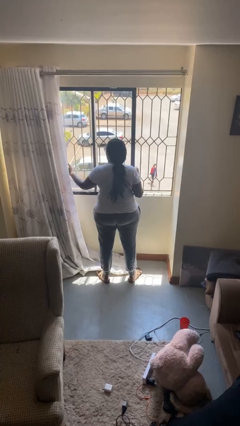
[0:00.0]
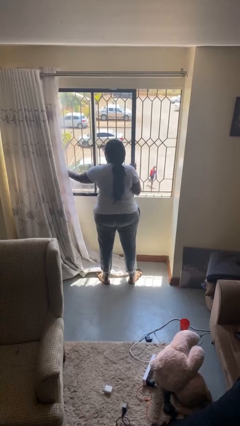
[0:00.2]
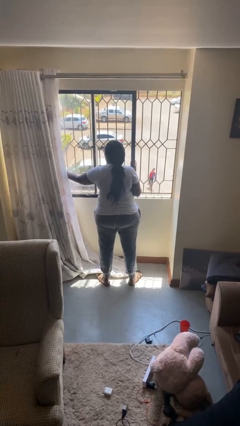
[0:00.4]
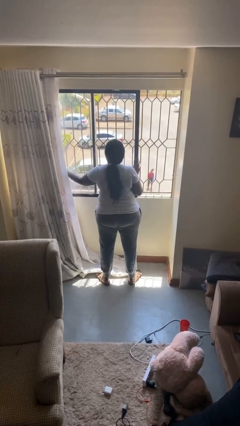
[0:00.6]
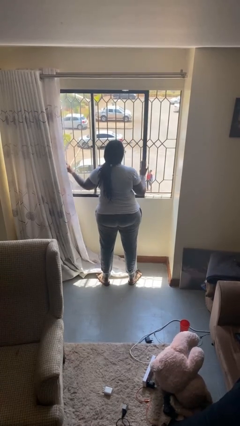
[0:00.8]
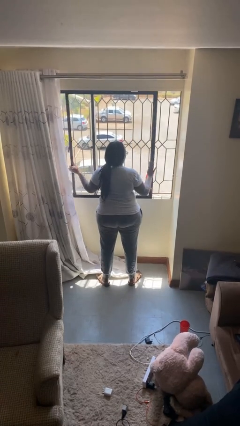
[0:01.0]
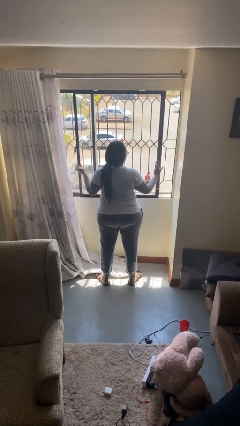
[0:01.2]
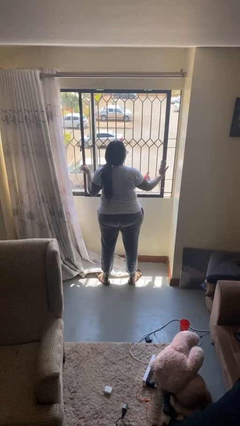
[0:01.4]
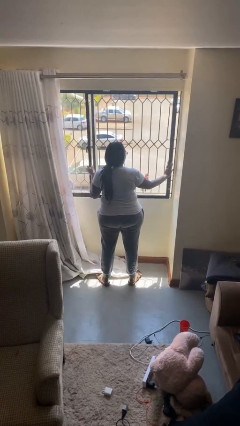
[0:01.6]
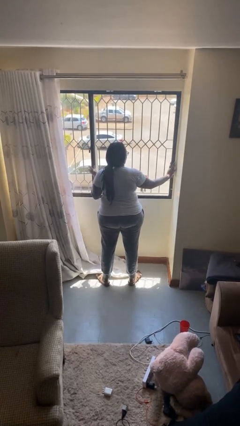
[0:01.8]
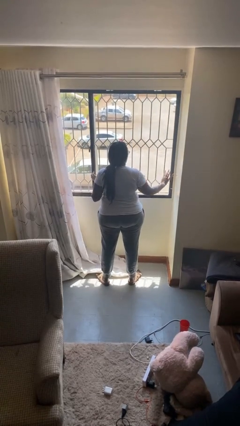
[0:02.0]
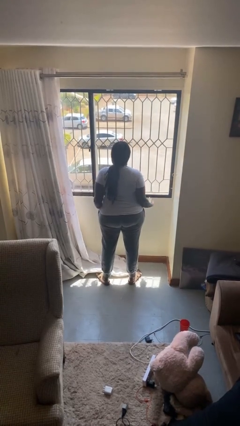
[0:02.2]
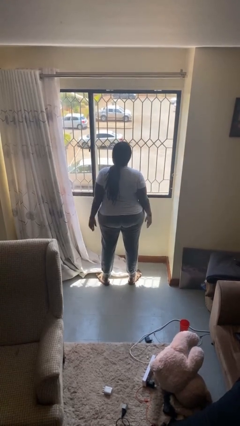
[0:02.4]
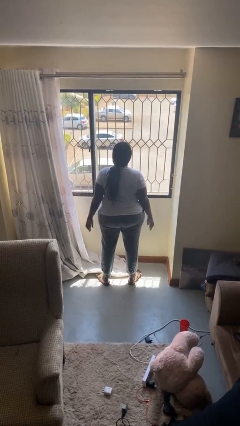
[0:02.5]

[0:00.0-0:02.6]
person closes home window

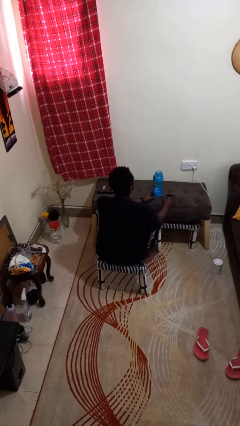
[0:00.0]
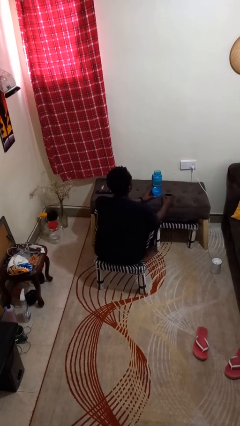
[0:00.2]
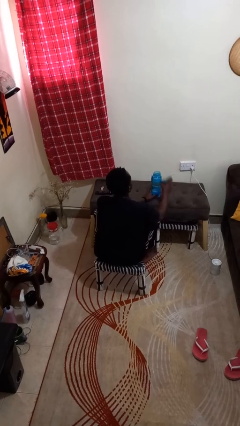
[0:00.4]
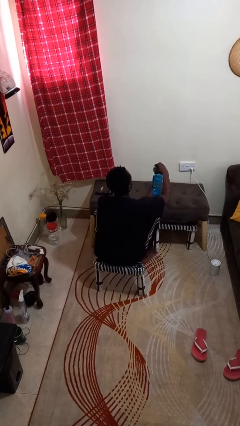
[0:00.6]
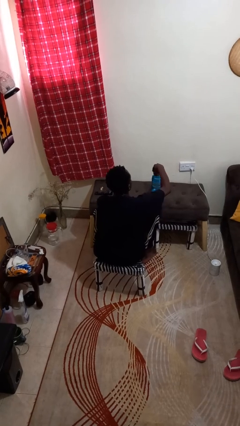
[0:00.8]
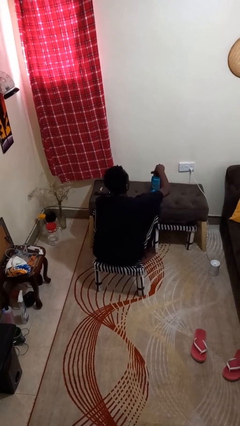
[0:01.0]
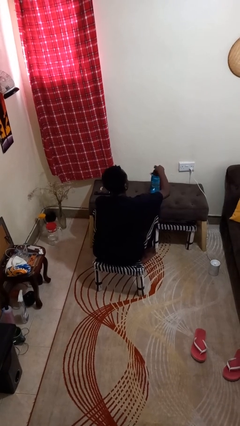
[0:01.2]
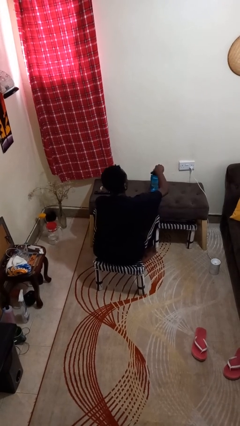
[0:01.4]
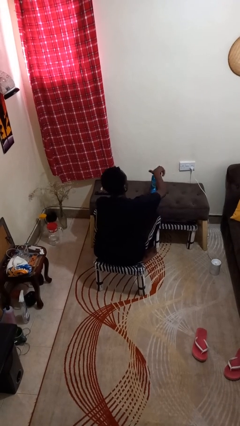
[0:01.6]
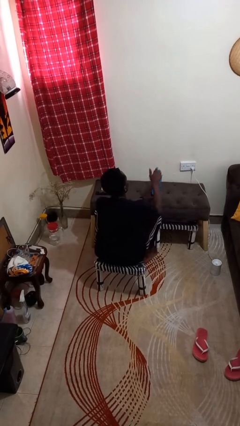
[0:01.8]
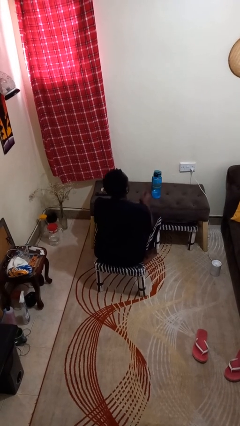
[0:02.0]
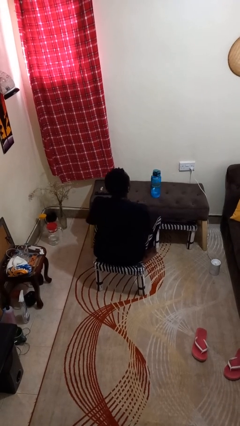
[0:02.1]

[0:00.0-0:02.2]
person closes jar

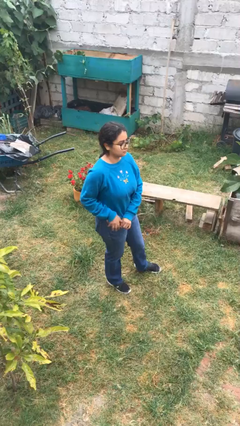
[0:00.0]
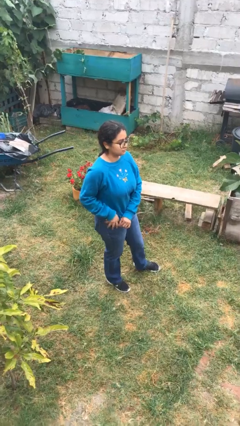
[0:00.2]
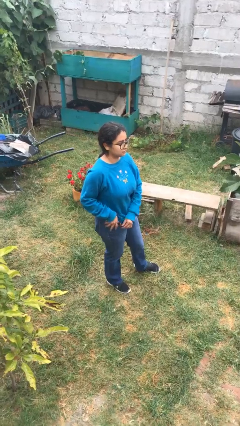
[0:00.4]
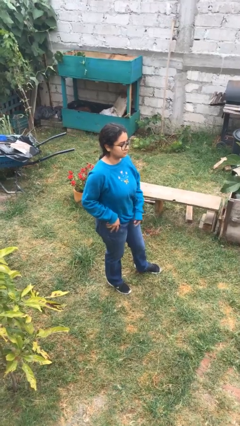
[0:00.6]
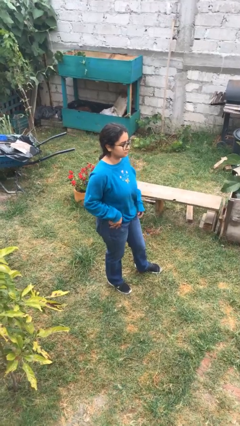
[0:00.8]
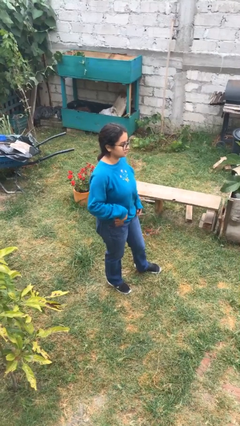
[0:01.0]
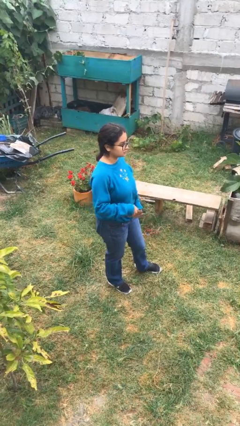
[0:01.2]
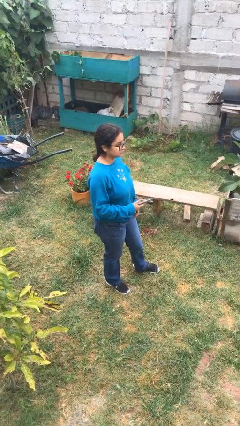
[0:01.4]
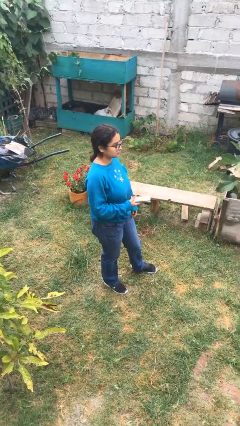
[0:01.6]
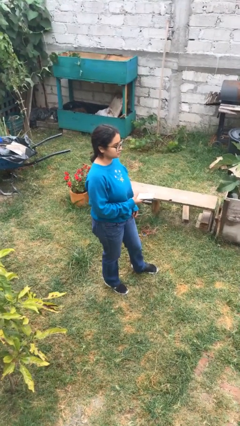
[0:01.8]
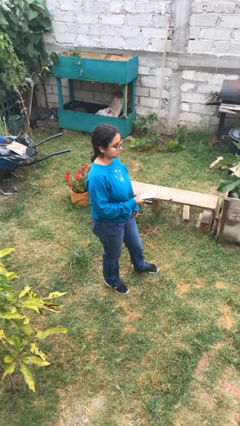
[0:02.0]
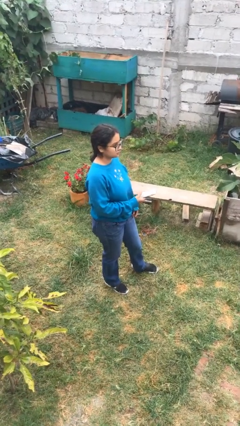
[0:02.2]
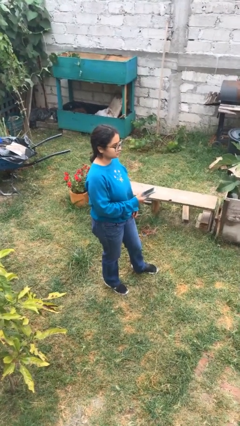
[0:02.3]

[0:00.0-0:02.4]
person takes phone from pocket

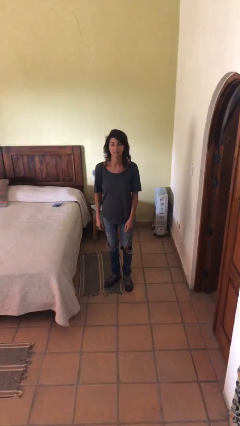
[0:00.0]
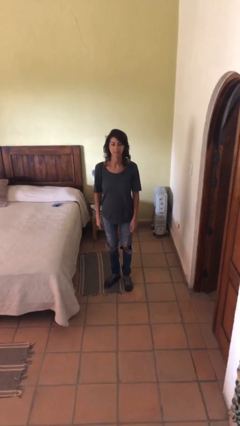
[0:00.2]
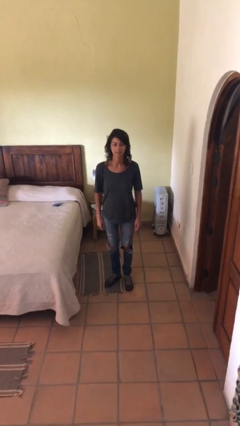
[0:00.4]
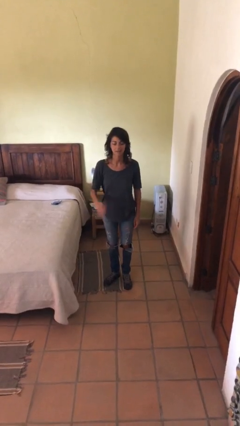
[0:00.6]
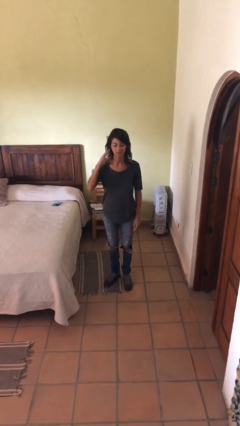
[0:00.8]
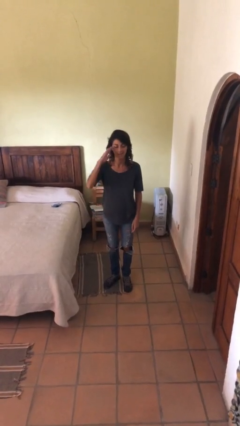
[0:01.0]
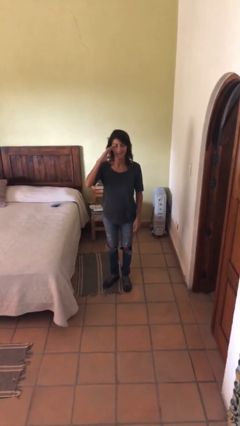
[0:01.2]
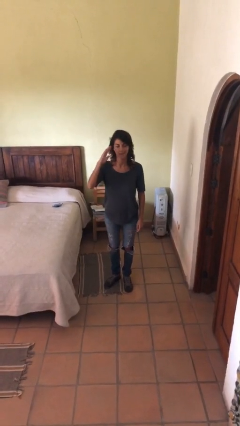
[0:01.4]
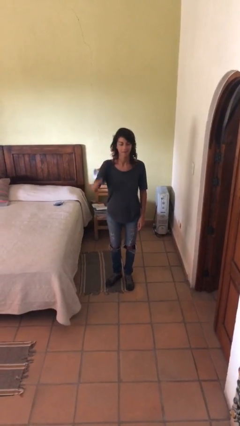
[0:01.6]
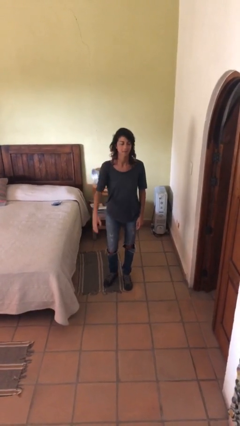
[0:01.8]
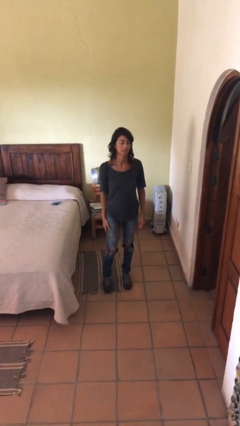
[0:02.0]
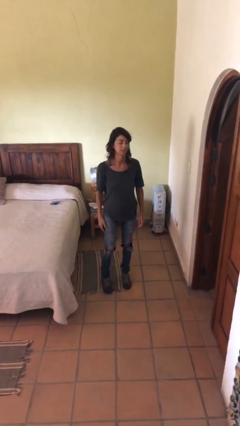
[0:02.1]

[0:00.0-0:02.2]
person salutes

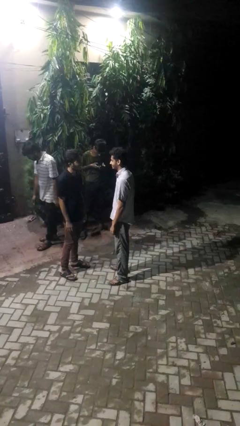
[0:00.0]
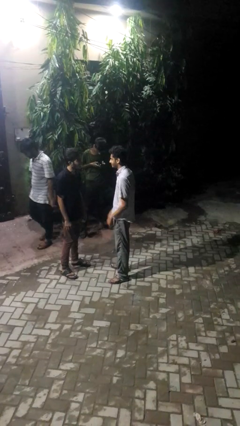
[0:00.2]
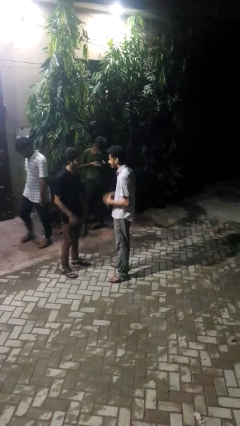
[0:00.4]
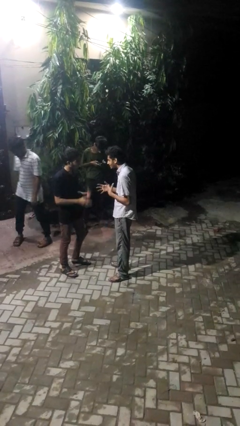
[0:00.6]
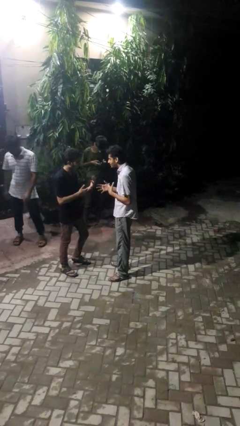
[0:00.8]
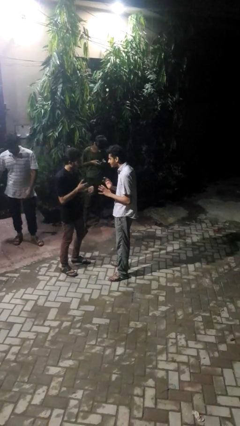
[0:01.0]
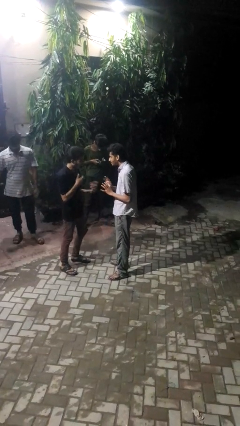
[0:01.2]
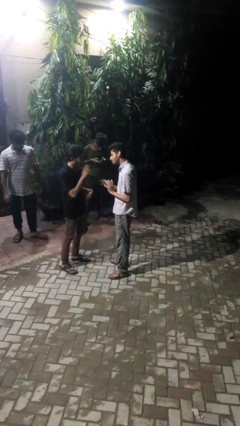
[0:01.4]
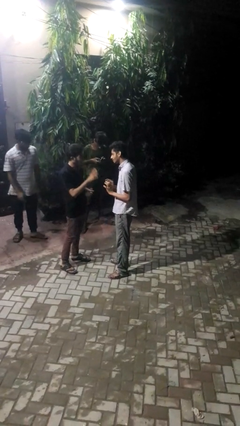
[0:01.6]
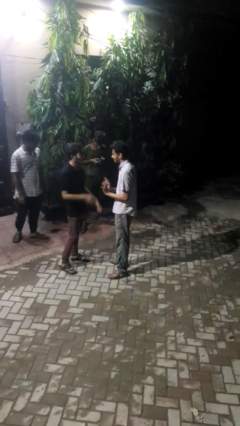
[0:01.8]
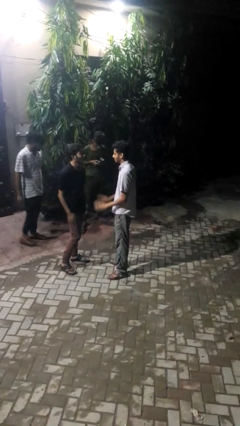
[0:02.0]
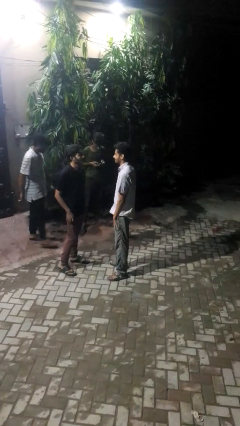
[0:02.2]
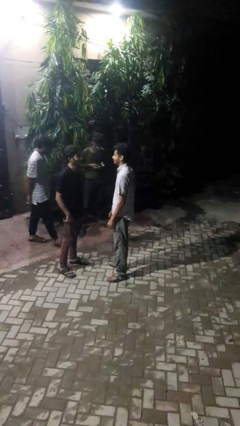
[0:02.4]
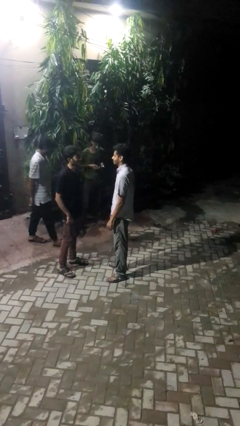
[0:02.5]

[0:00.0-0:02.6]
person talks to person

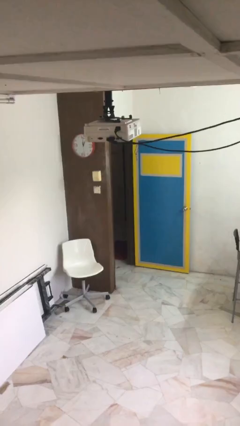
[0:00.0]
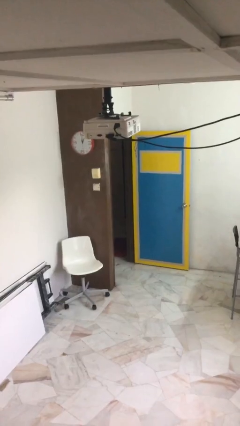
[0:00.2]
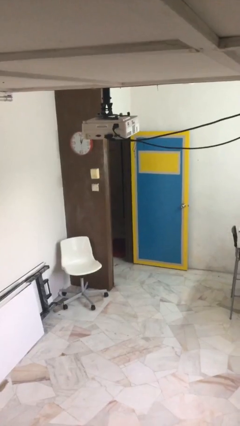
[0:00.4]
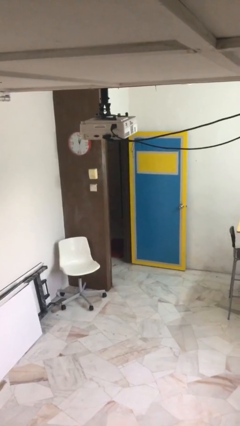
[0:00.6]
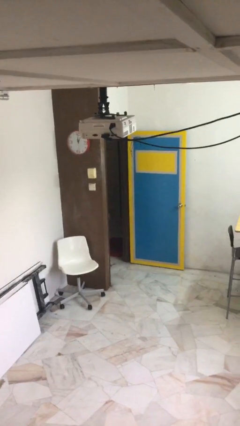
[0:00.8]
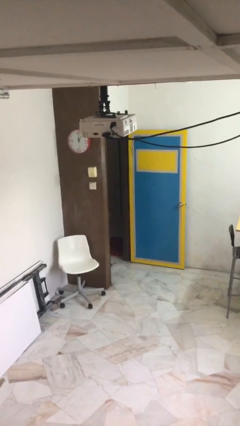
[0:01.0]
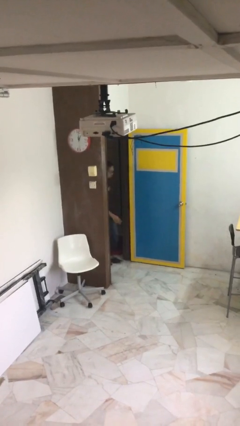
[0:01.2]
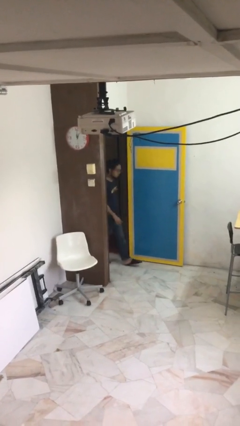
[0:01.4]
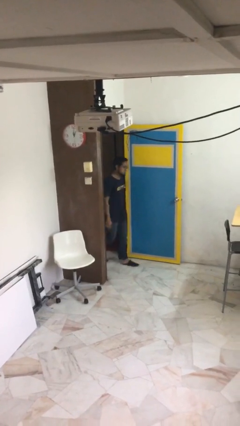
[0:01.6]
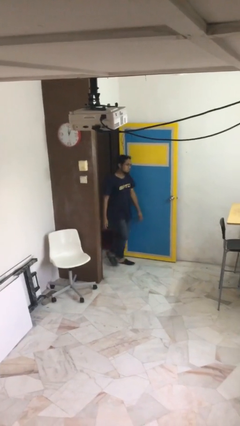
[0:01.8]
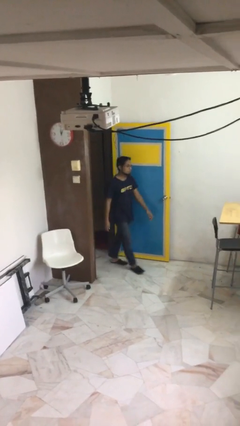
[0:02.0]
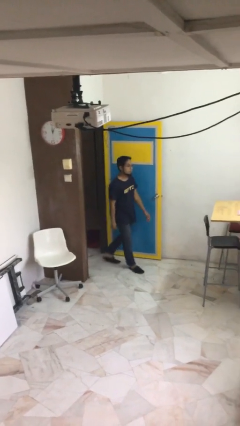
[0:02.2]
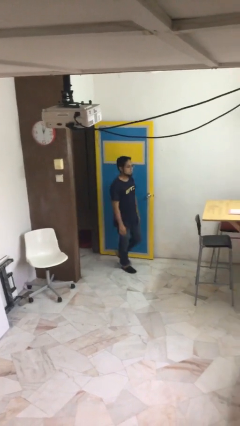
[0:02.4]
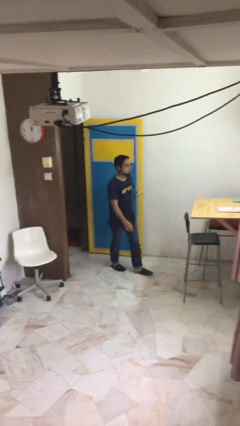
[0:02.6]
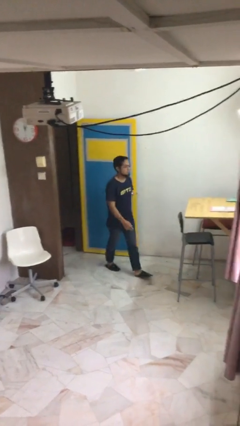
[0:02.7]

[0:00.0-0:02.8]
person enters scene through structure

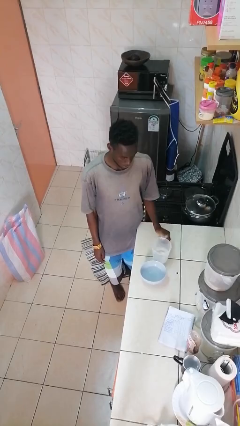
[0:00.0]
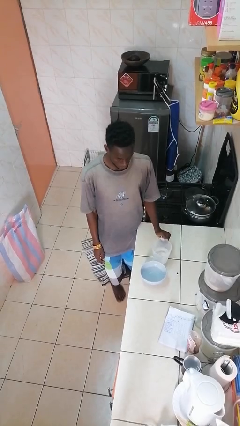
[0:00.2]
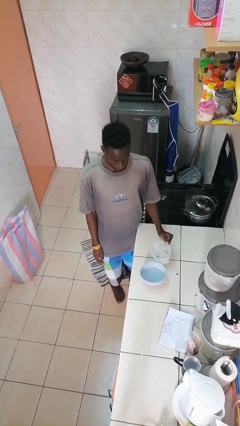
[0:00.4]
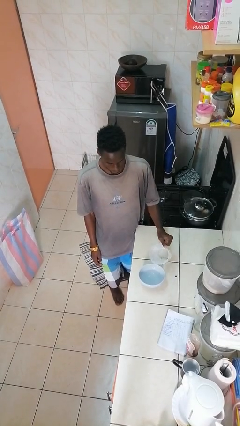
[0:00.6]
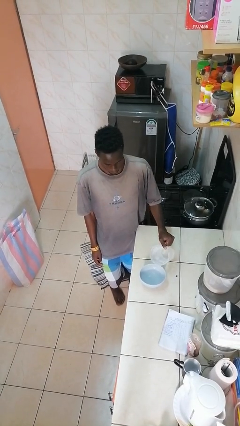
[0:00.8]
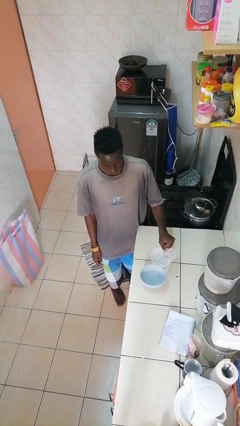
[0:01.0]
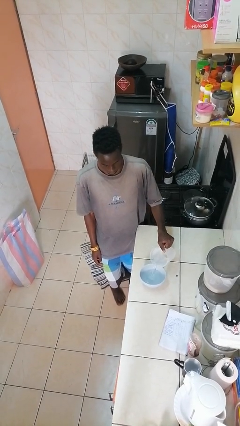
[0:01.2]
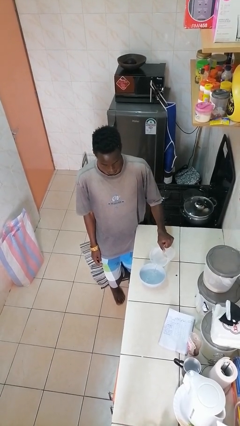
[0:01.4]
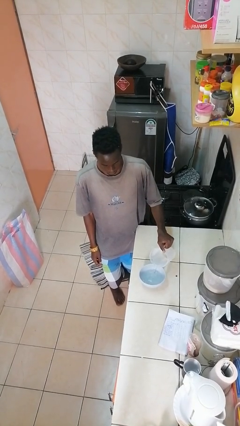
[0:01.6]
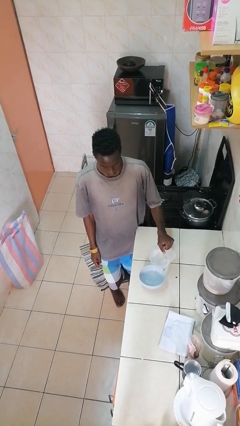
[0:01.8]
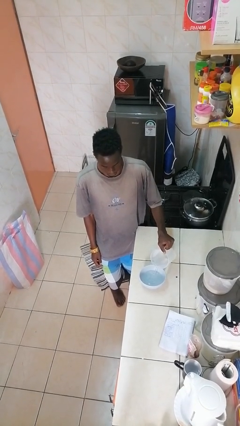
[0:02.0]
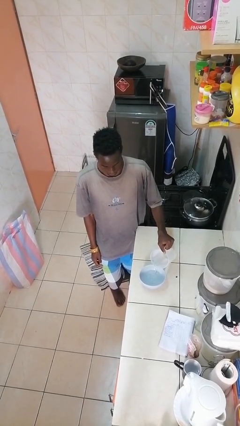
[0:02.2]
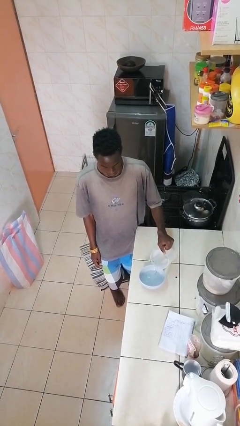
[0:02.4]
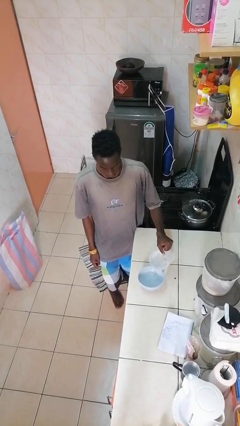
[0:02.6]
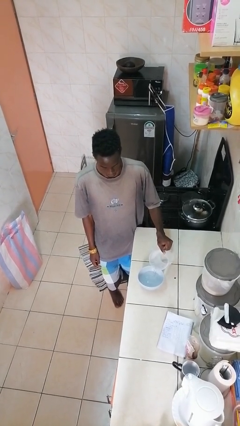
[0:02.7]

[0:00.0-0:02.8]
person pours into bowl
